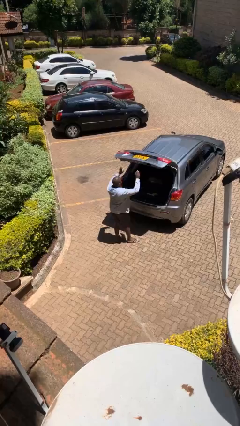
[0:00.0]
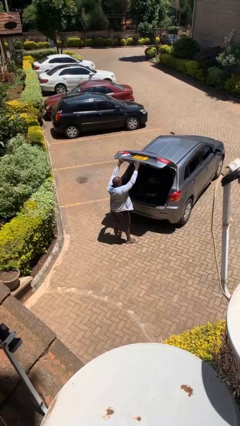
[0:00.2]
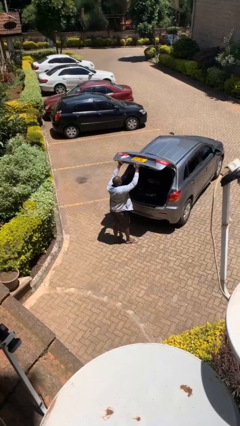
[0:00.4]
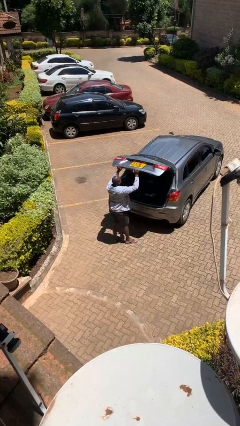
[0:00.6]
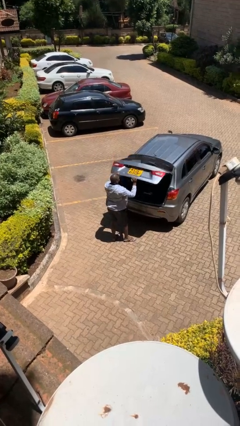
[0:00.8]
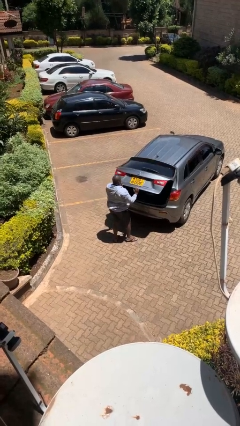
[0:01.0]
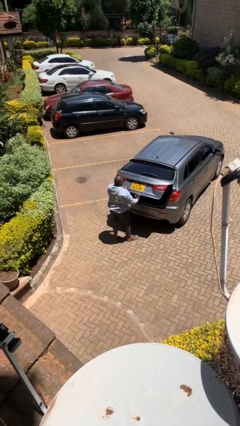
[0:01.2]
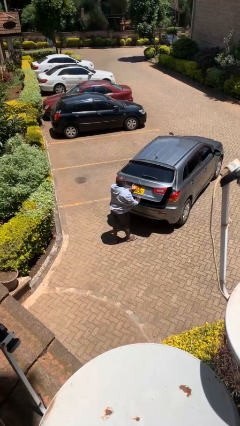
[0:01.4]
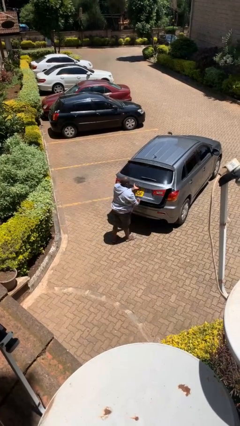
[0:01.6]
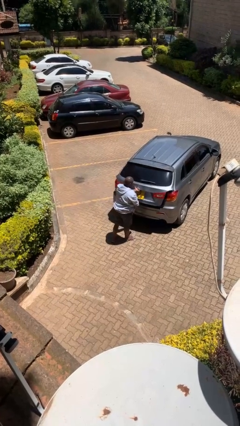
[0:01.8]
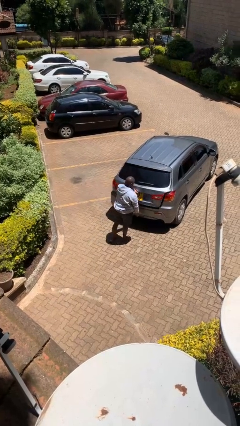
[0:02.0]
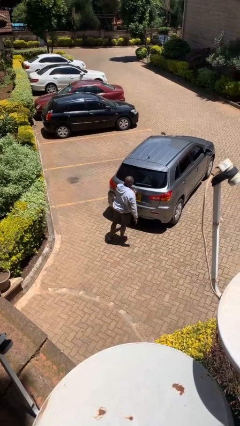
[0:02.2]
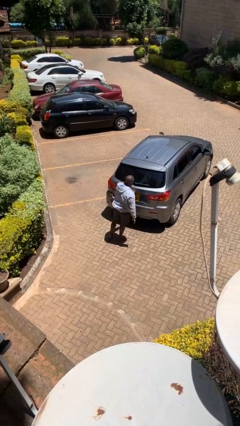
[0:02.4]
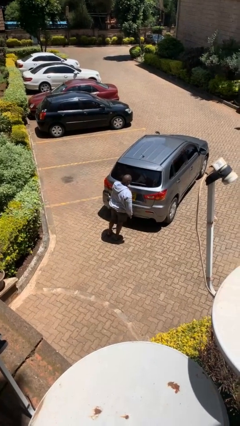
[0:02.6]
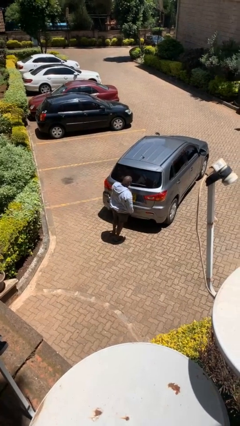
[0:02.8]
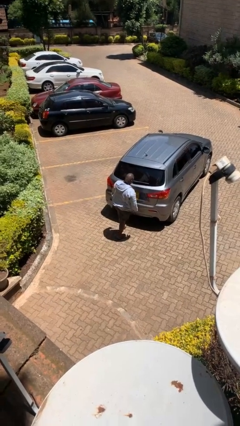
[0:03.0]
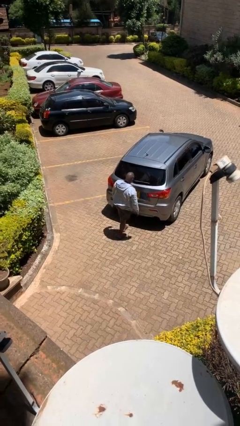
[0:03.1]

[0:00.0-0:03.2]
person closes car trunk

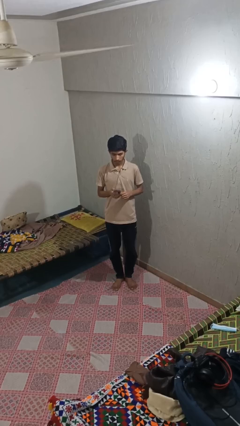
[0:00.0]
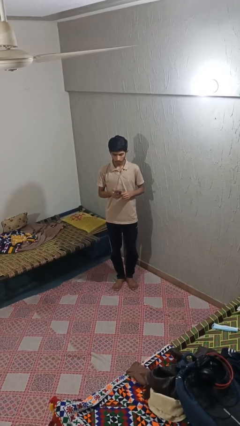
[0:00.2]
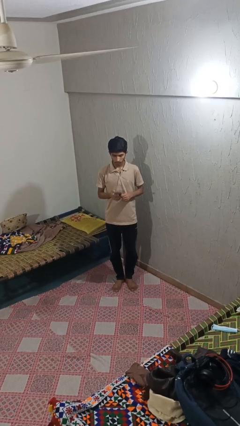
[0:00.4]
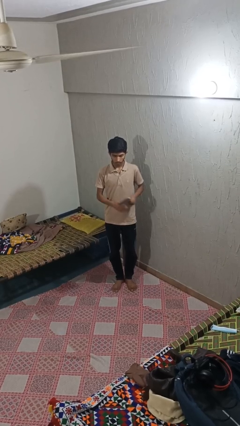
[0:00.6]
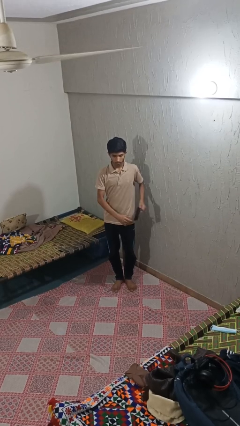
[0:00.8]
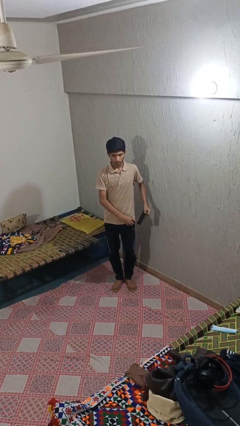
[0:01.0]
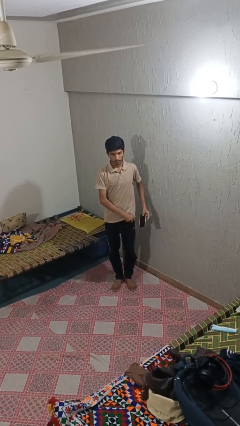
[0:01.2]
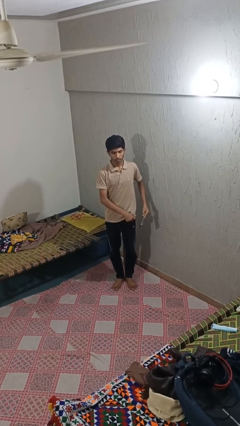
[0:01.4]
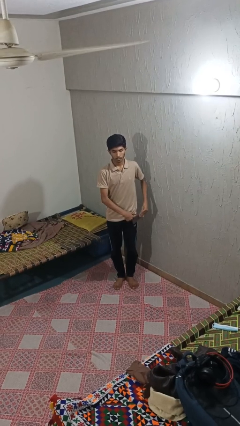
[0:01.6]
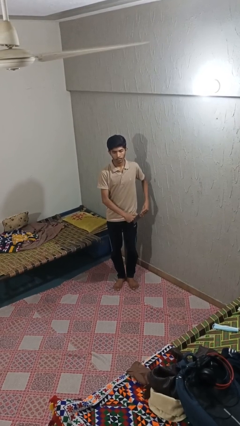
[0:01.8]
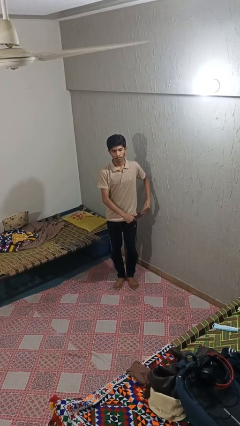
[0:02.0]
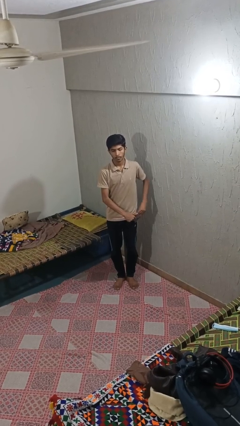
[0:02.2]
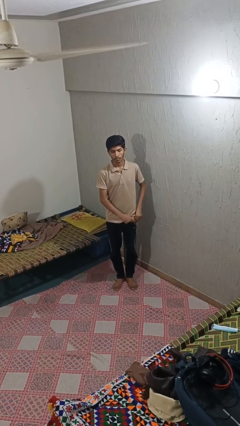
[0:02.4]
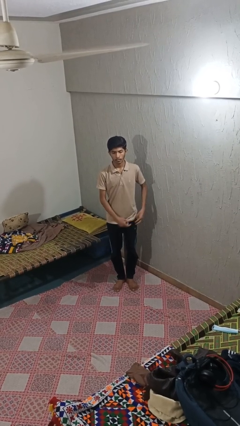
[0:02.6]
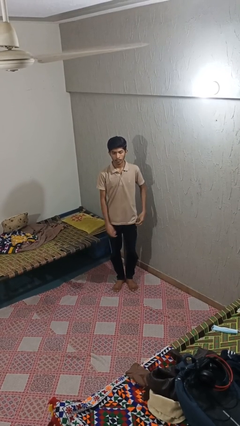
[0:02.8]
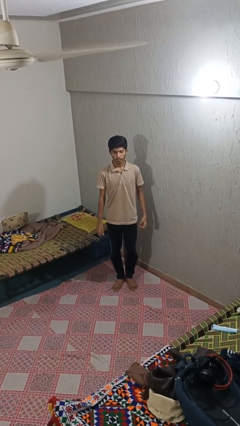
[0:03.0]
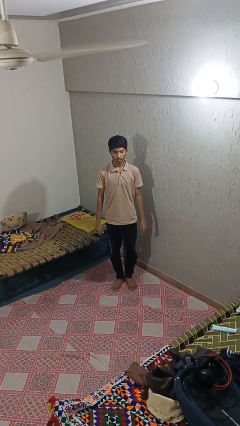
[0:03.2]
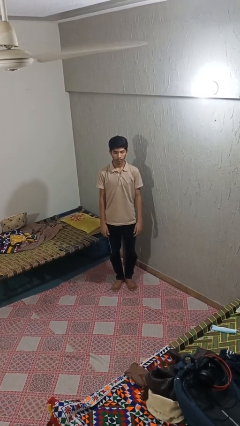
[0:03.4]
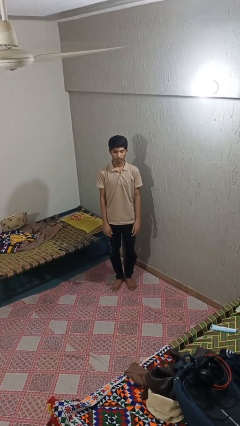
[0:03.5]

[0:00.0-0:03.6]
person puts phone into pocket

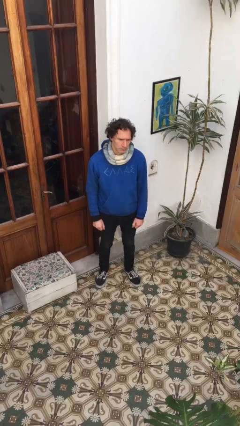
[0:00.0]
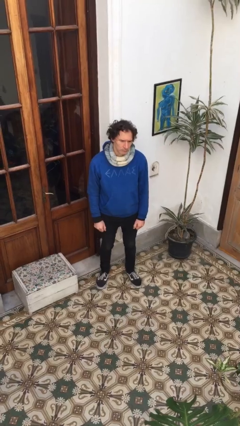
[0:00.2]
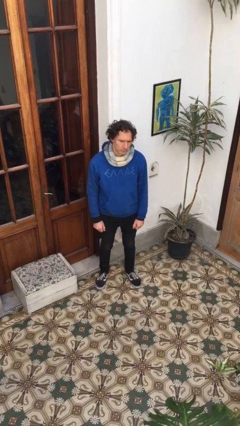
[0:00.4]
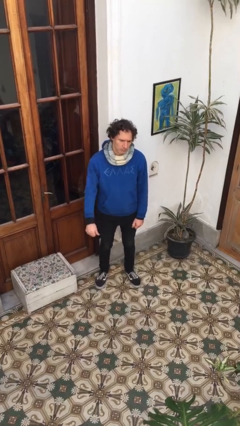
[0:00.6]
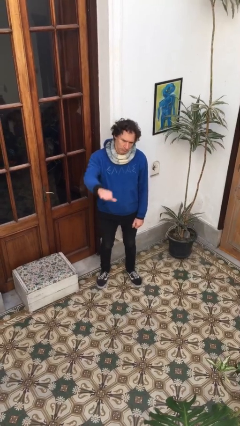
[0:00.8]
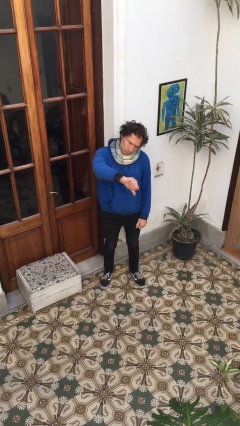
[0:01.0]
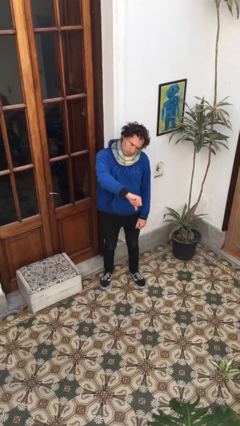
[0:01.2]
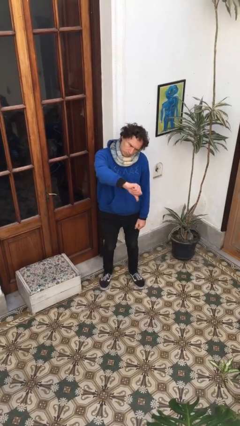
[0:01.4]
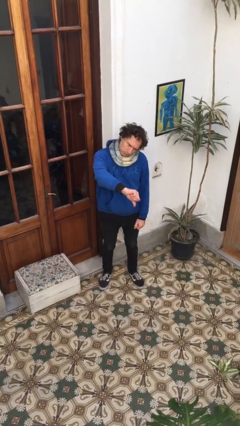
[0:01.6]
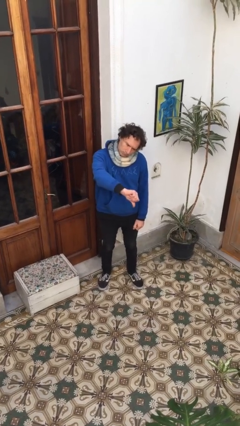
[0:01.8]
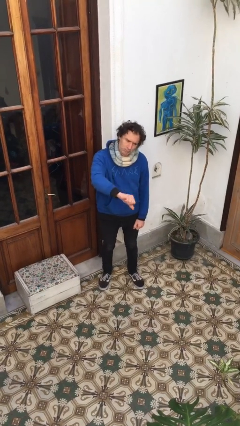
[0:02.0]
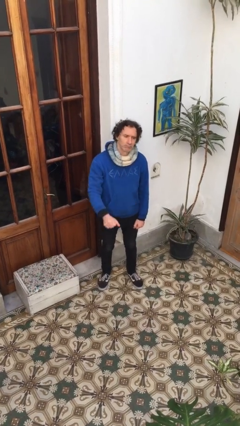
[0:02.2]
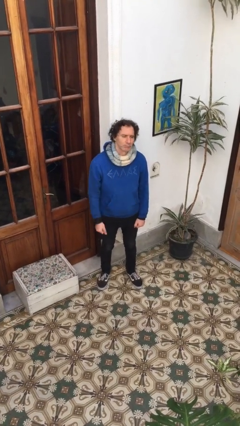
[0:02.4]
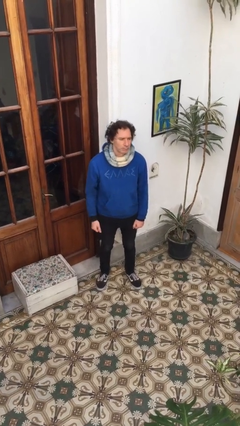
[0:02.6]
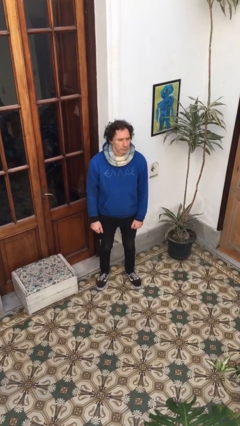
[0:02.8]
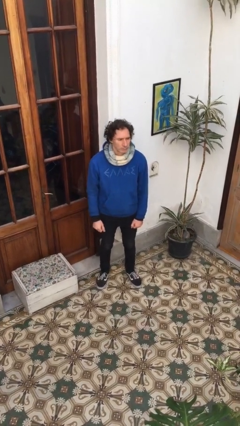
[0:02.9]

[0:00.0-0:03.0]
person gestures thumbs down

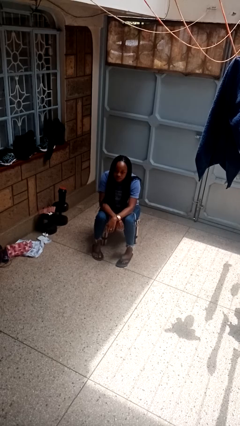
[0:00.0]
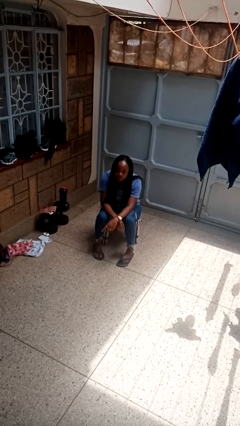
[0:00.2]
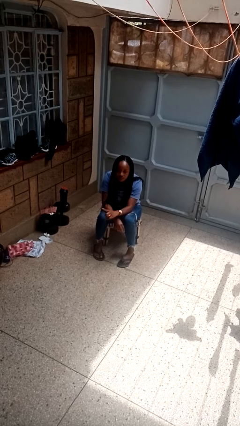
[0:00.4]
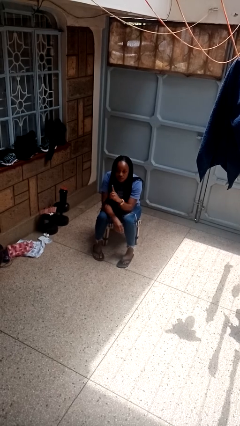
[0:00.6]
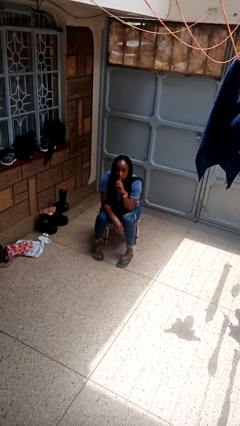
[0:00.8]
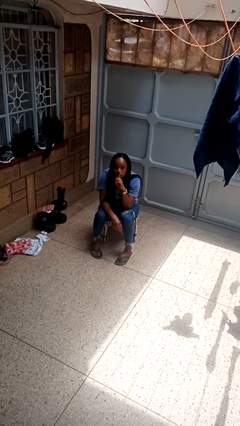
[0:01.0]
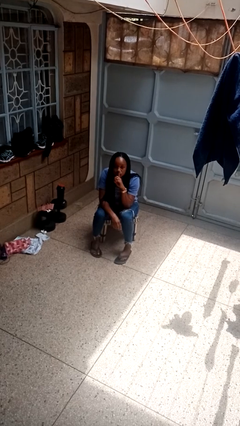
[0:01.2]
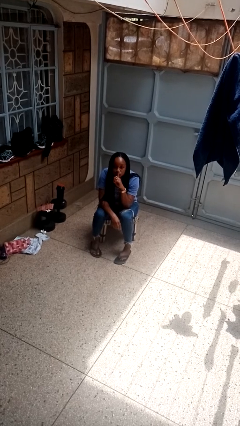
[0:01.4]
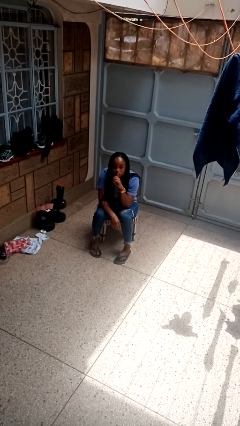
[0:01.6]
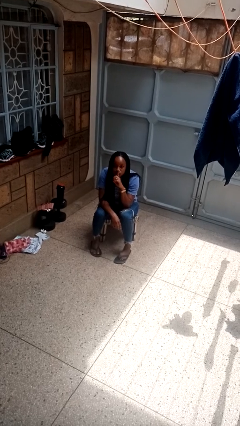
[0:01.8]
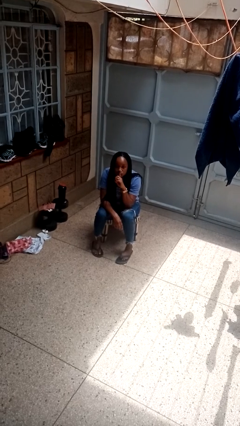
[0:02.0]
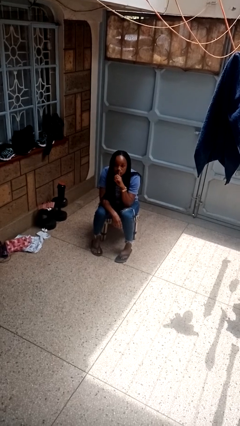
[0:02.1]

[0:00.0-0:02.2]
person gestures be quiet

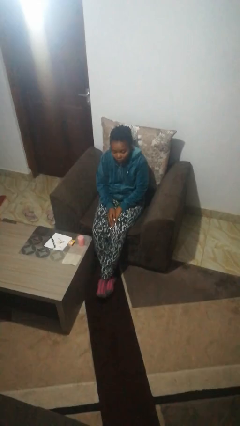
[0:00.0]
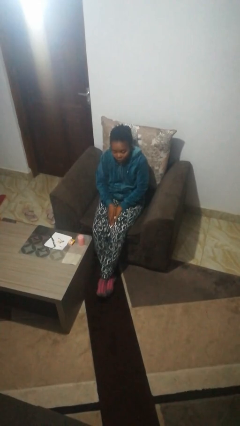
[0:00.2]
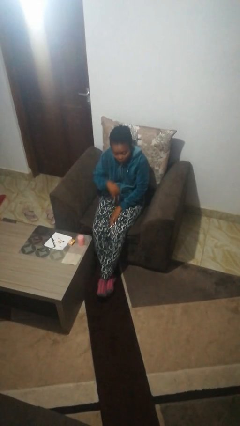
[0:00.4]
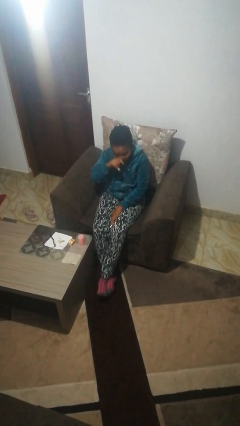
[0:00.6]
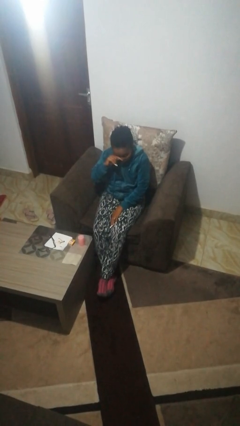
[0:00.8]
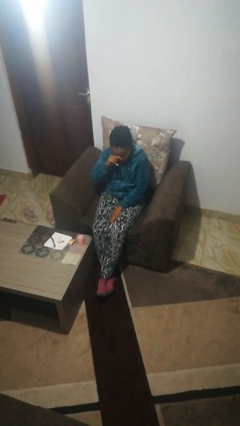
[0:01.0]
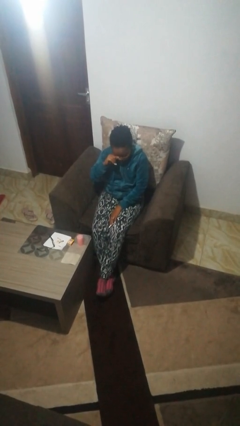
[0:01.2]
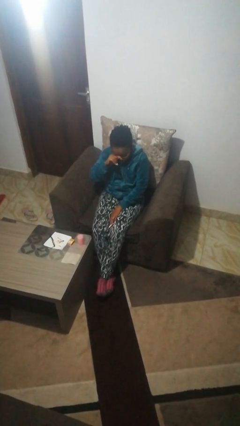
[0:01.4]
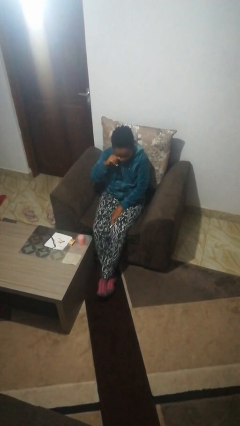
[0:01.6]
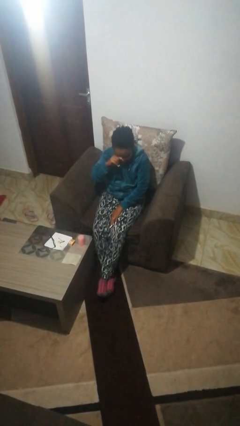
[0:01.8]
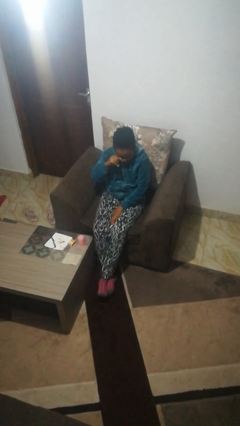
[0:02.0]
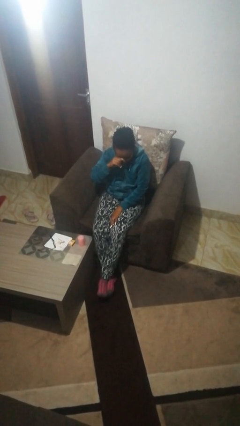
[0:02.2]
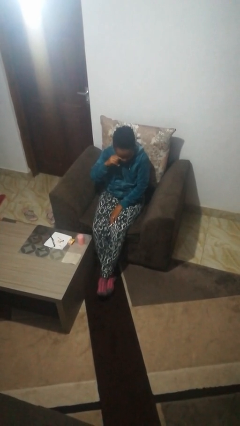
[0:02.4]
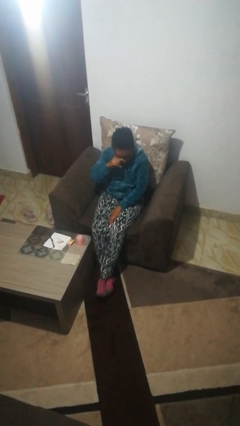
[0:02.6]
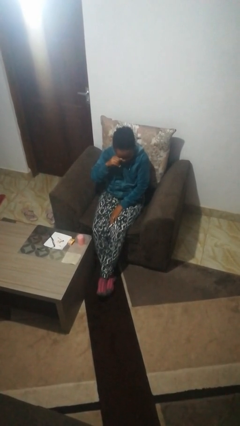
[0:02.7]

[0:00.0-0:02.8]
person rubs eyes

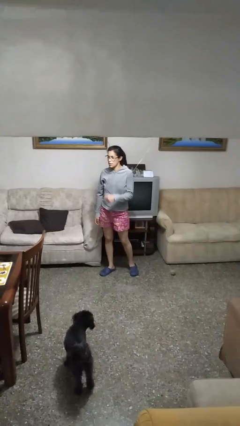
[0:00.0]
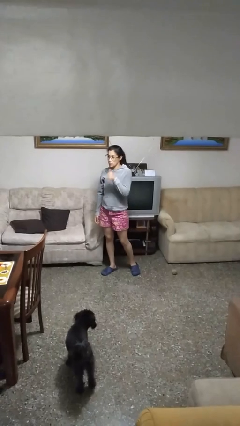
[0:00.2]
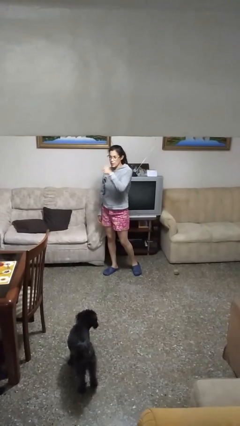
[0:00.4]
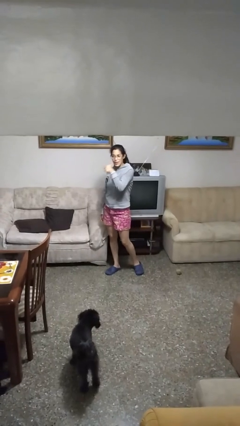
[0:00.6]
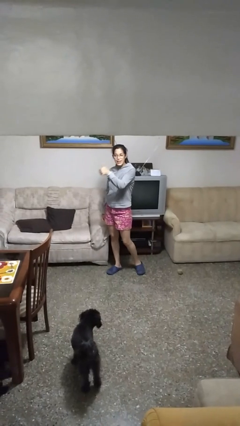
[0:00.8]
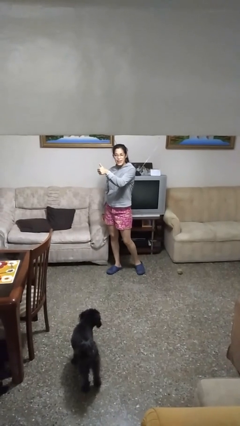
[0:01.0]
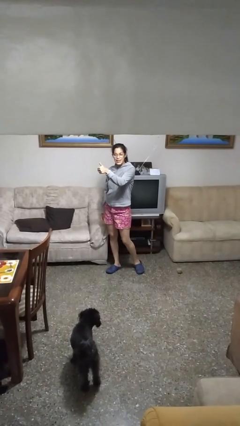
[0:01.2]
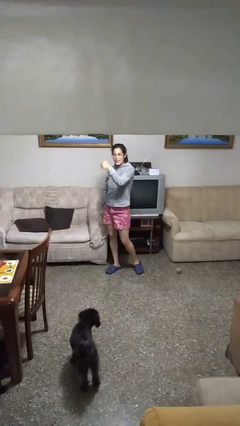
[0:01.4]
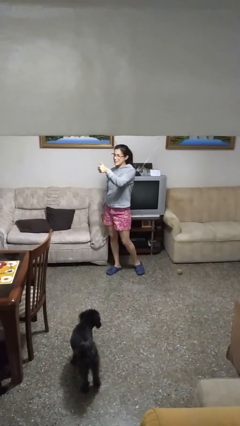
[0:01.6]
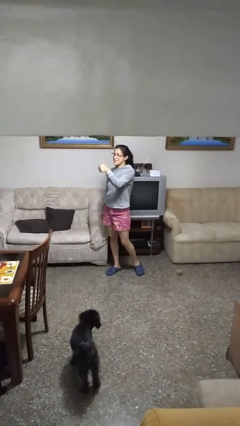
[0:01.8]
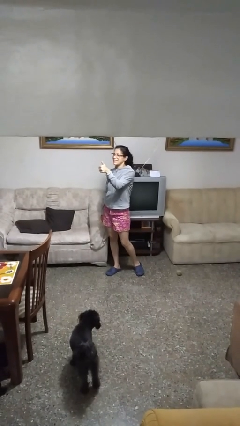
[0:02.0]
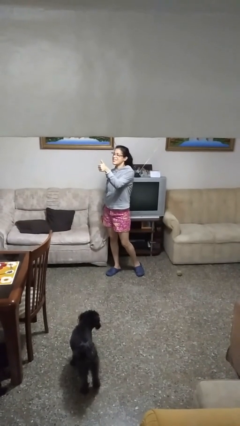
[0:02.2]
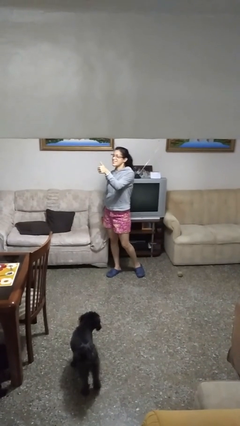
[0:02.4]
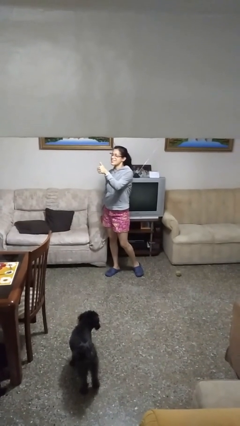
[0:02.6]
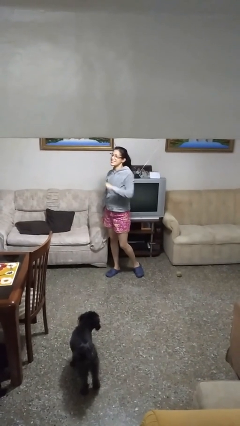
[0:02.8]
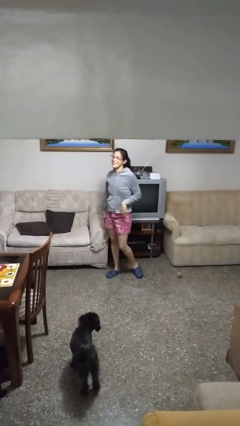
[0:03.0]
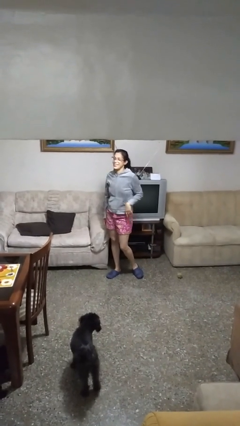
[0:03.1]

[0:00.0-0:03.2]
person gestures thumbs up
